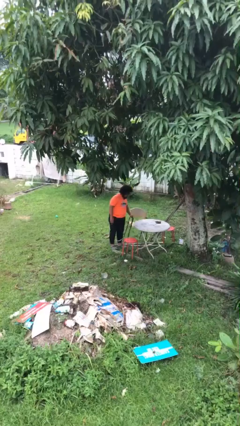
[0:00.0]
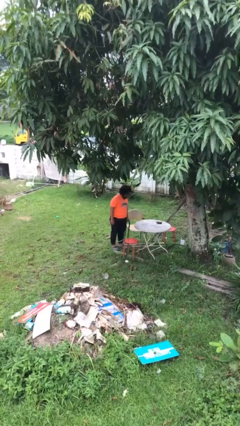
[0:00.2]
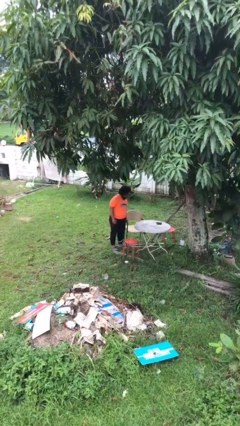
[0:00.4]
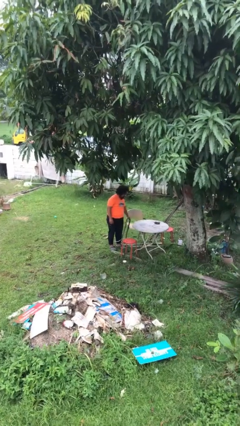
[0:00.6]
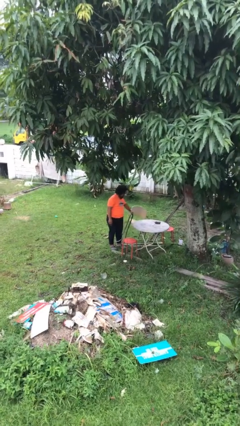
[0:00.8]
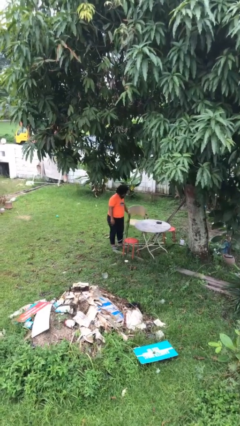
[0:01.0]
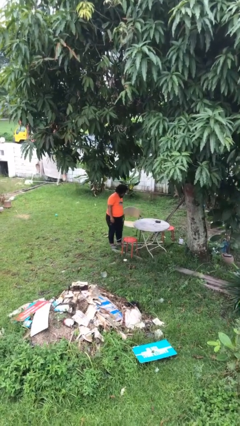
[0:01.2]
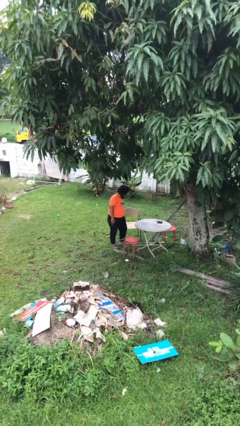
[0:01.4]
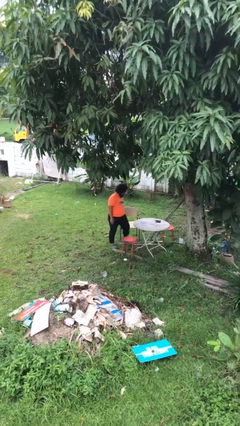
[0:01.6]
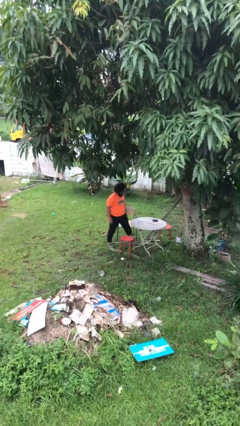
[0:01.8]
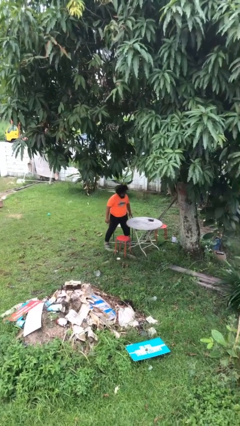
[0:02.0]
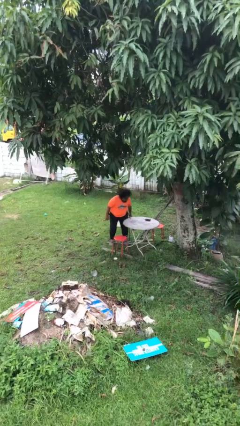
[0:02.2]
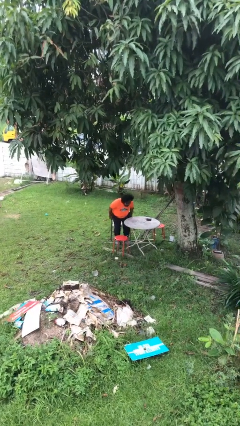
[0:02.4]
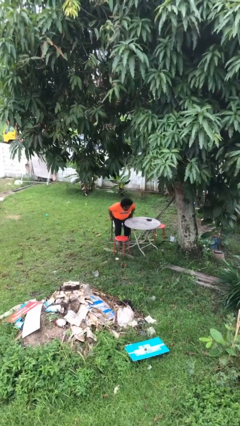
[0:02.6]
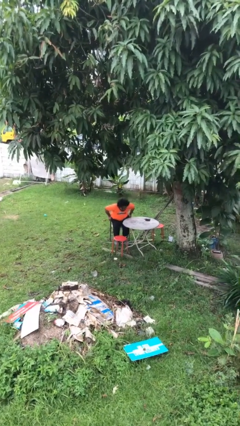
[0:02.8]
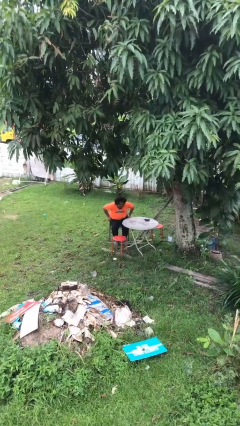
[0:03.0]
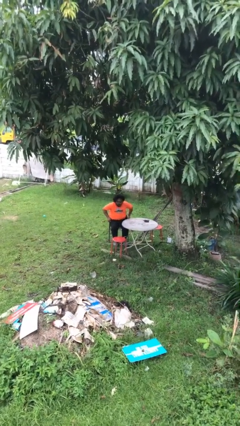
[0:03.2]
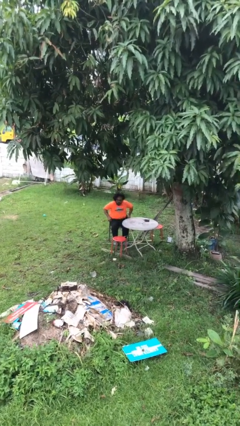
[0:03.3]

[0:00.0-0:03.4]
person sits down

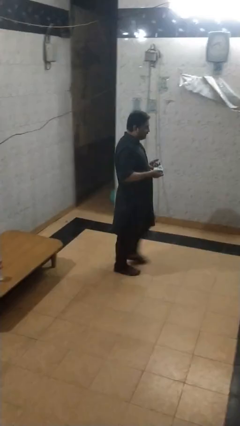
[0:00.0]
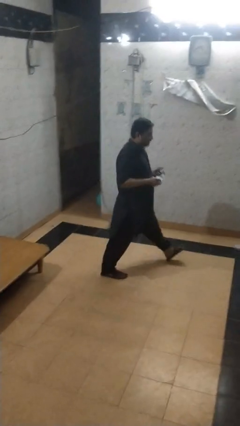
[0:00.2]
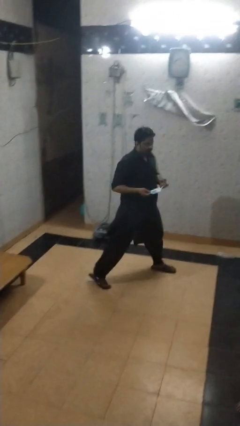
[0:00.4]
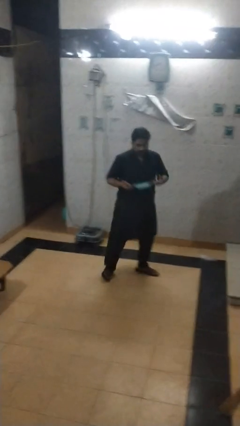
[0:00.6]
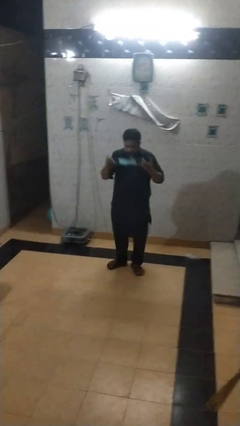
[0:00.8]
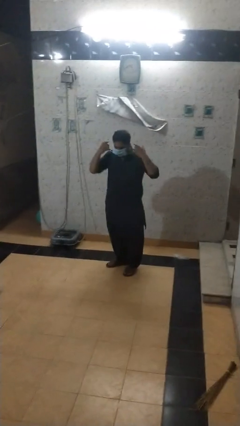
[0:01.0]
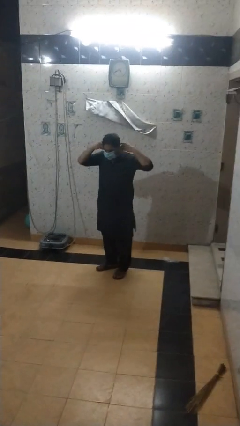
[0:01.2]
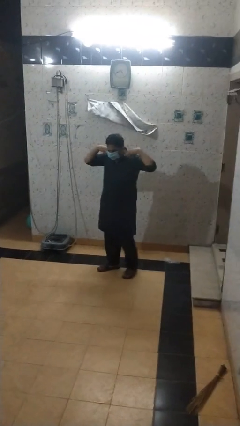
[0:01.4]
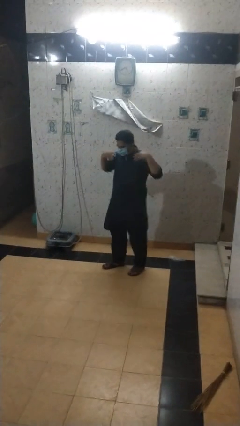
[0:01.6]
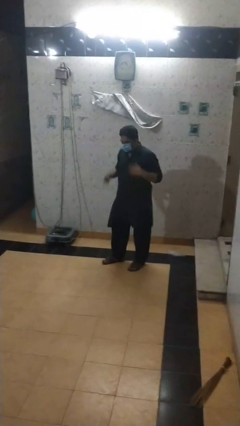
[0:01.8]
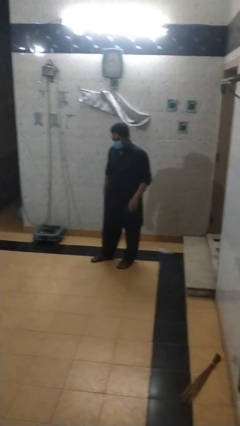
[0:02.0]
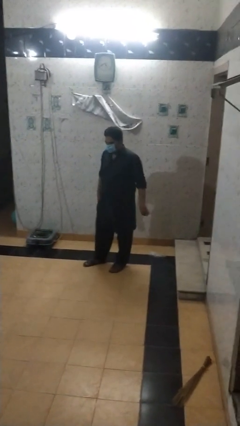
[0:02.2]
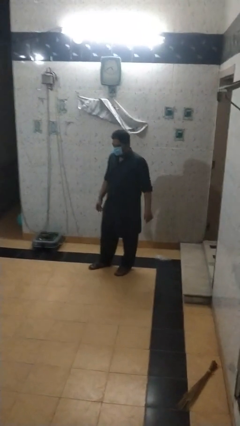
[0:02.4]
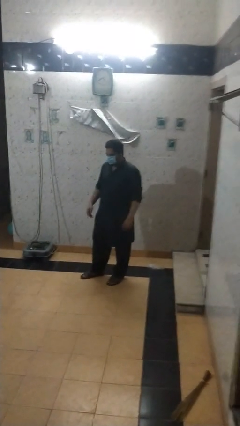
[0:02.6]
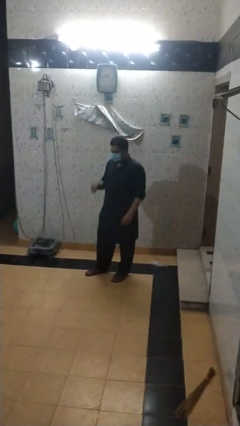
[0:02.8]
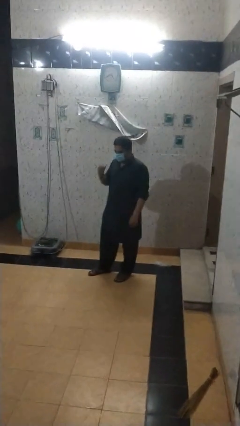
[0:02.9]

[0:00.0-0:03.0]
person puts on facemask

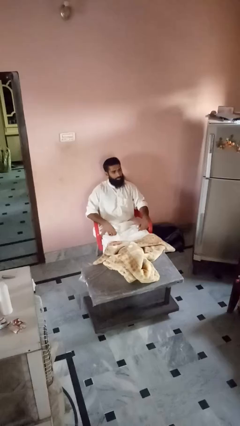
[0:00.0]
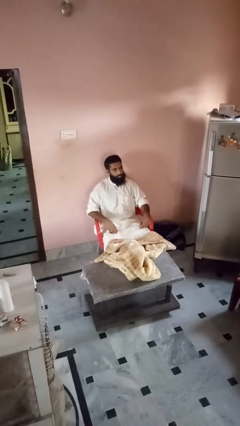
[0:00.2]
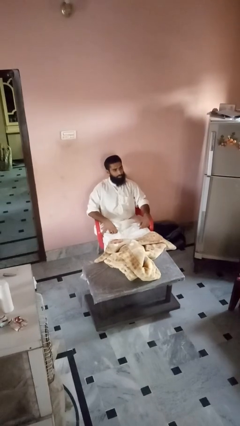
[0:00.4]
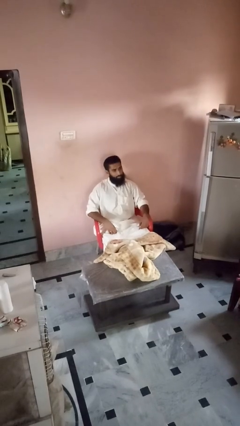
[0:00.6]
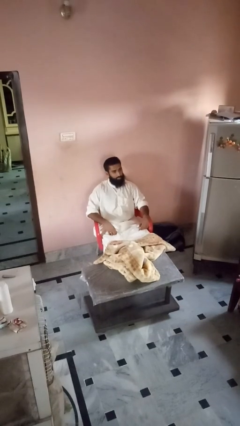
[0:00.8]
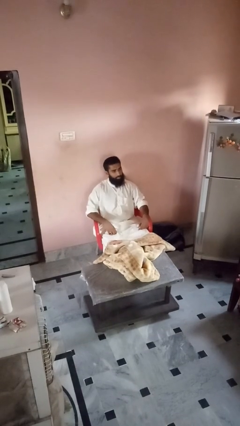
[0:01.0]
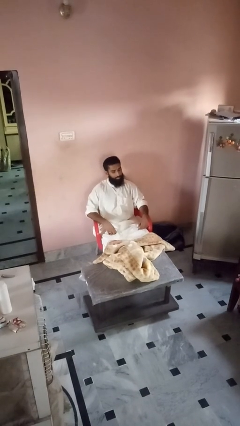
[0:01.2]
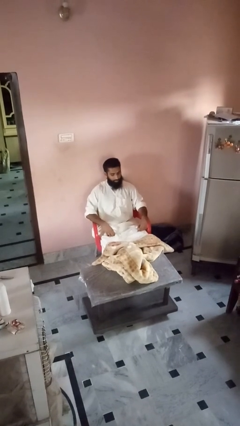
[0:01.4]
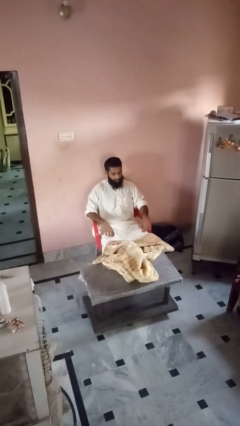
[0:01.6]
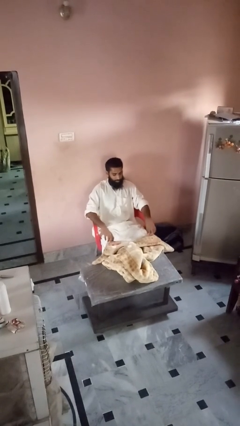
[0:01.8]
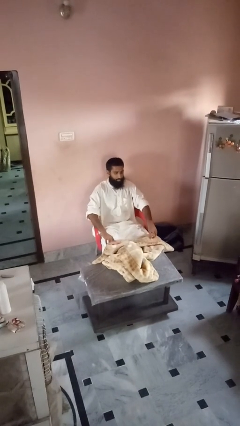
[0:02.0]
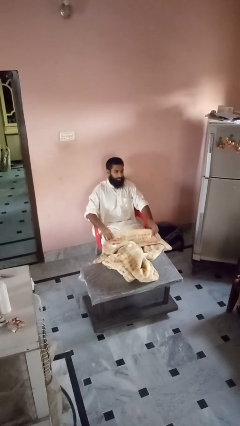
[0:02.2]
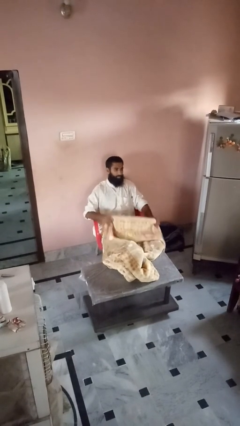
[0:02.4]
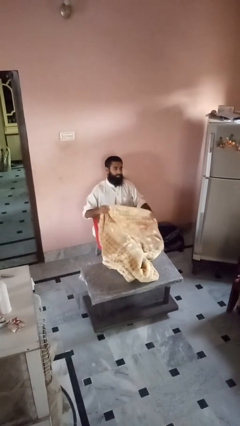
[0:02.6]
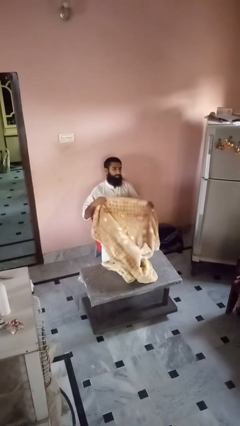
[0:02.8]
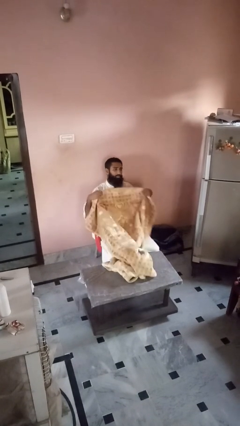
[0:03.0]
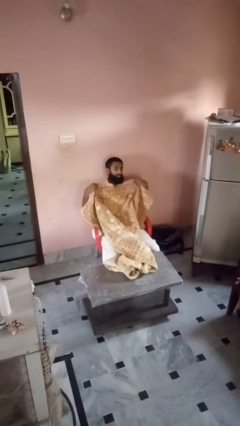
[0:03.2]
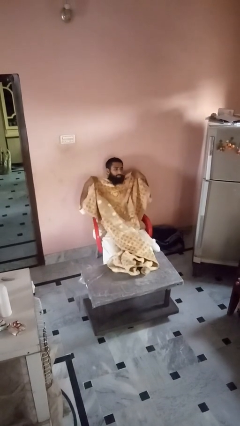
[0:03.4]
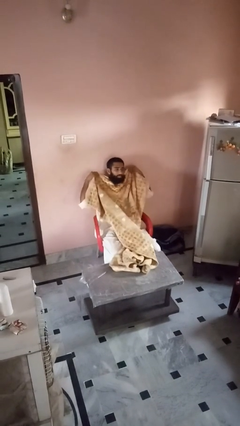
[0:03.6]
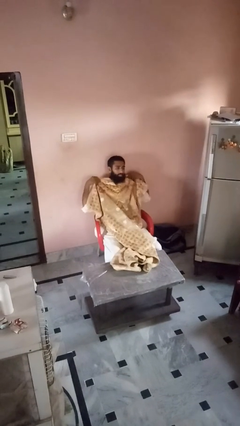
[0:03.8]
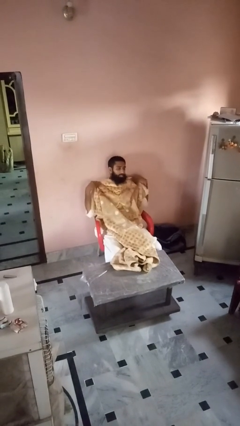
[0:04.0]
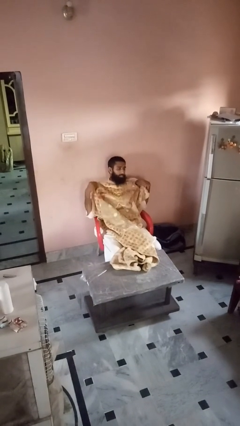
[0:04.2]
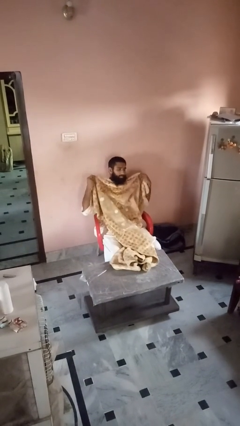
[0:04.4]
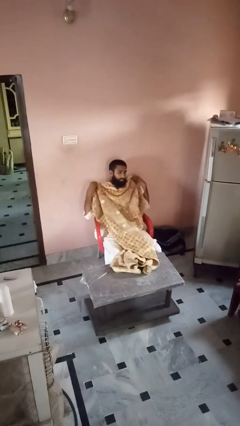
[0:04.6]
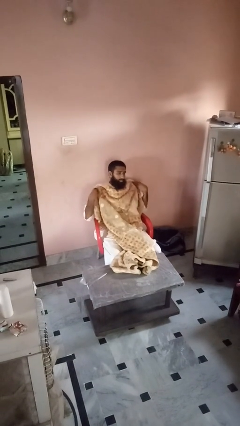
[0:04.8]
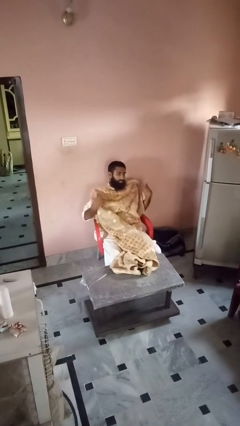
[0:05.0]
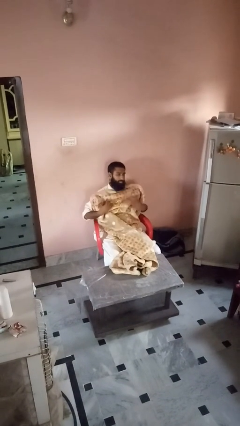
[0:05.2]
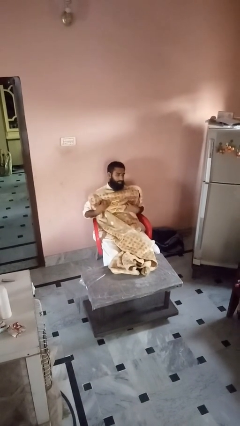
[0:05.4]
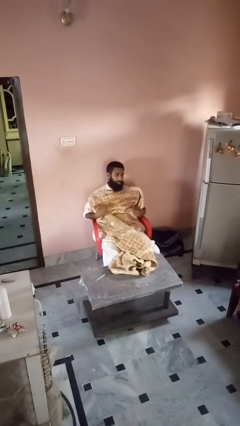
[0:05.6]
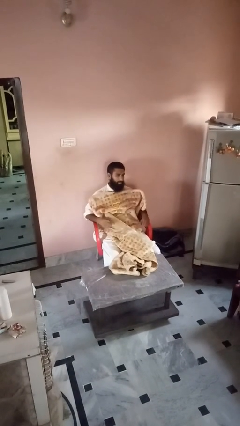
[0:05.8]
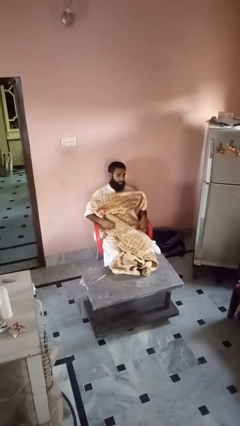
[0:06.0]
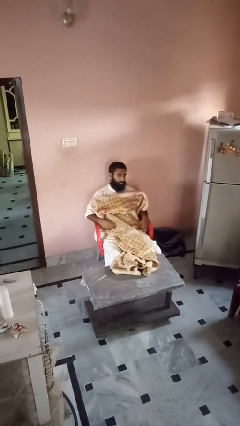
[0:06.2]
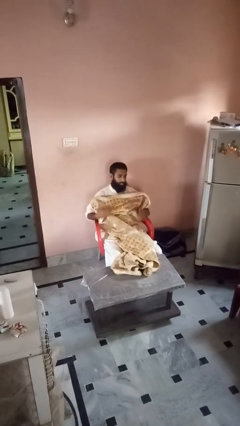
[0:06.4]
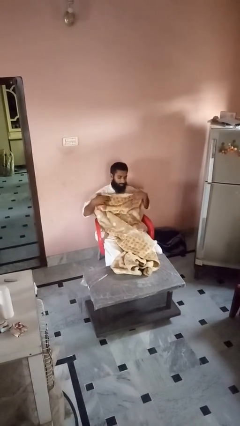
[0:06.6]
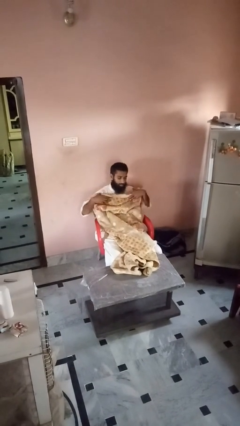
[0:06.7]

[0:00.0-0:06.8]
person covers with blanket

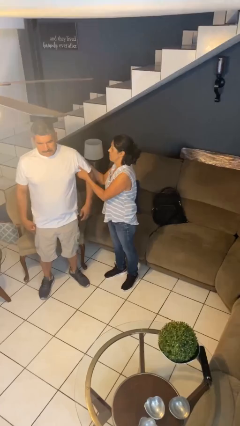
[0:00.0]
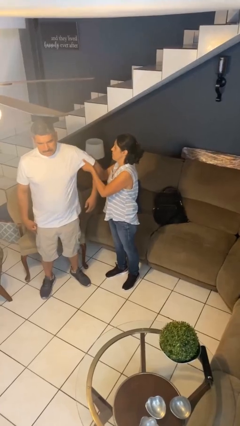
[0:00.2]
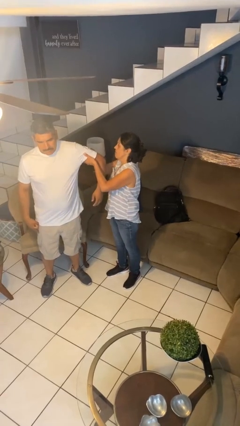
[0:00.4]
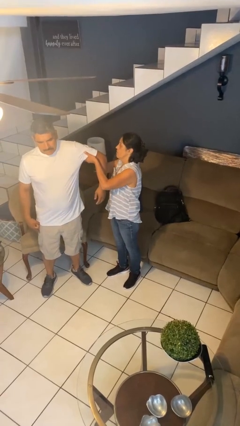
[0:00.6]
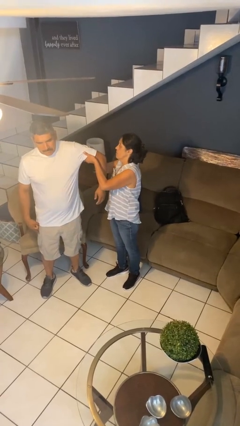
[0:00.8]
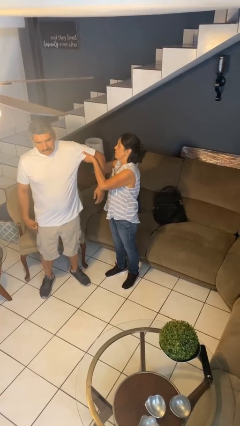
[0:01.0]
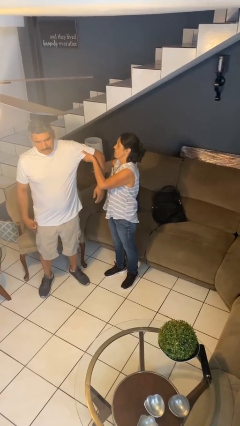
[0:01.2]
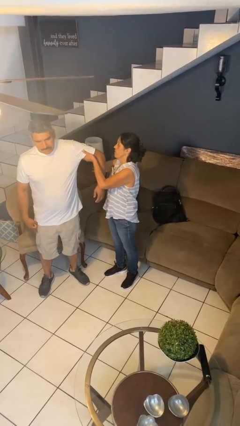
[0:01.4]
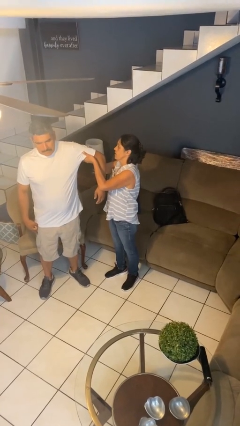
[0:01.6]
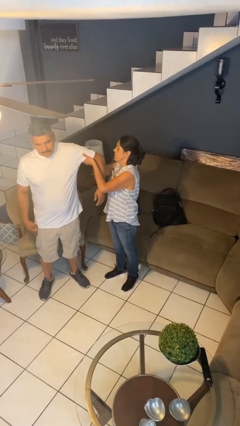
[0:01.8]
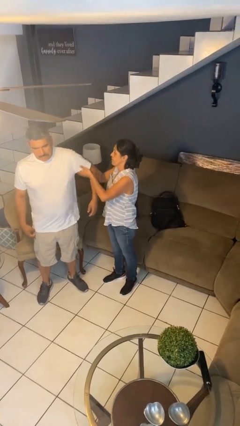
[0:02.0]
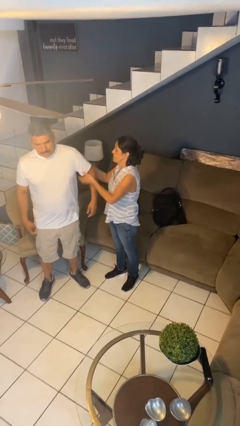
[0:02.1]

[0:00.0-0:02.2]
person grabs person by bicep

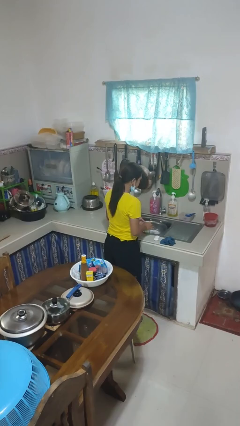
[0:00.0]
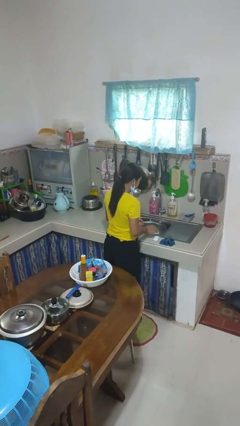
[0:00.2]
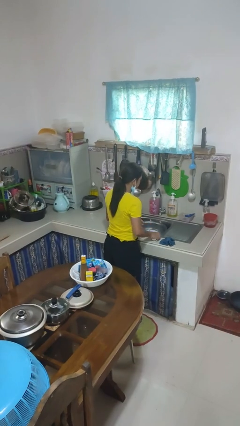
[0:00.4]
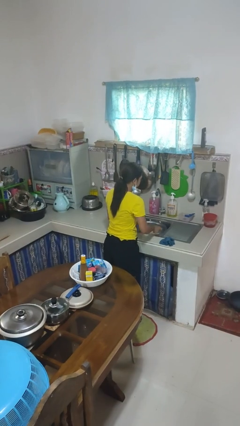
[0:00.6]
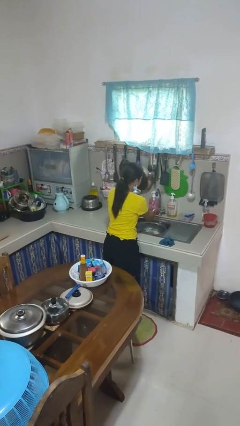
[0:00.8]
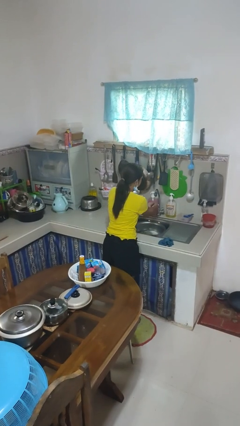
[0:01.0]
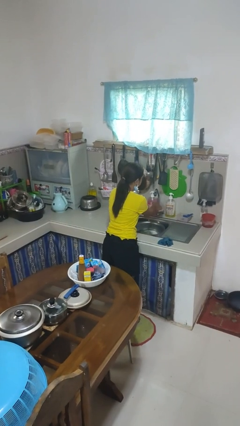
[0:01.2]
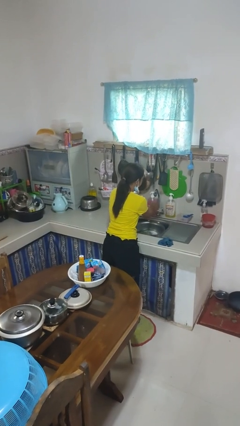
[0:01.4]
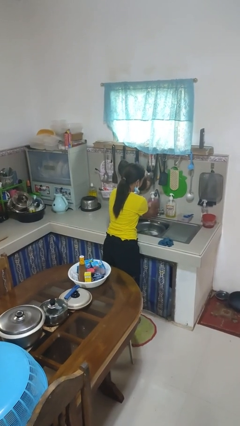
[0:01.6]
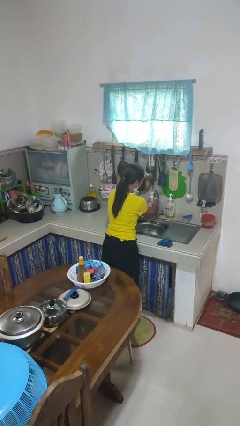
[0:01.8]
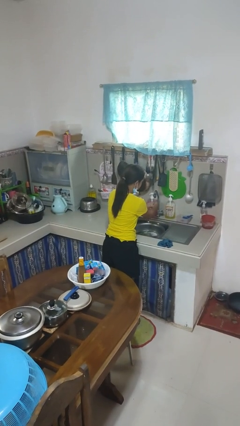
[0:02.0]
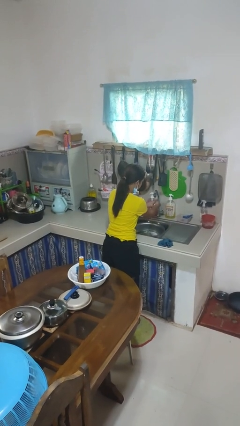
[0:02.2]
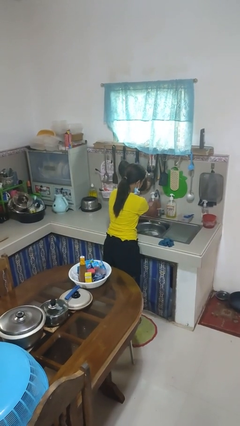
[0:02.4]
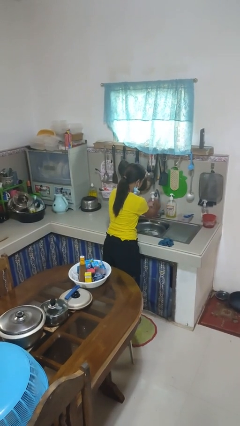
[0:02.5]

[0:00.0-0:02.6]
person washes hands
